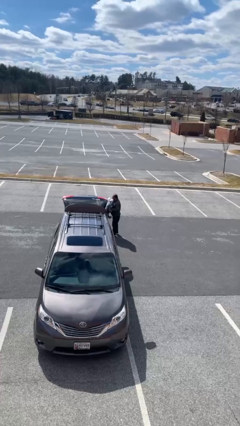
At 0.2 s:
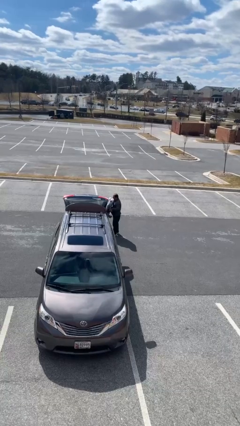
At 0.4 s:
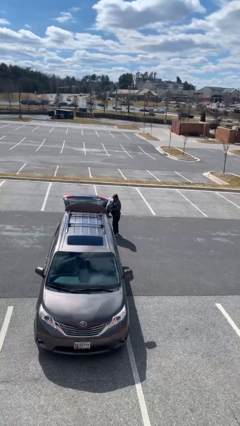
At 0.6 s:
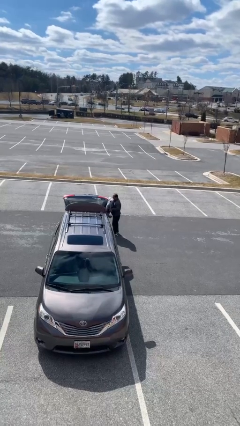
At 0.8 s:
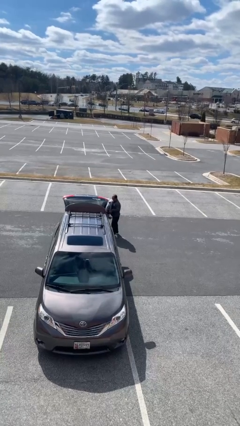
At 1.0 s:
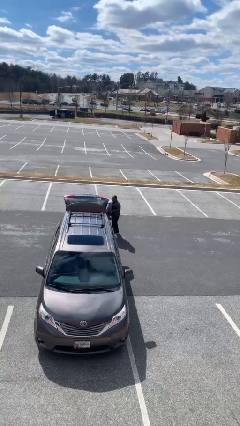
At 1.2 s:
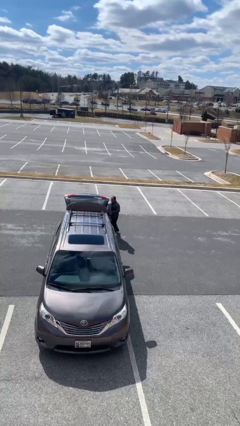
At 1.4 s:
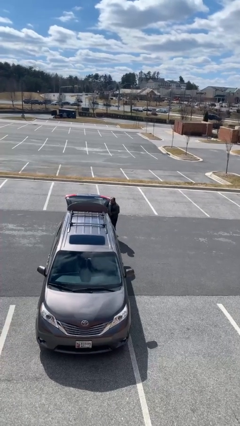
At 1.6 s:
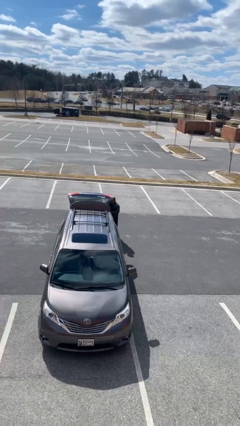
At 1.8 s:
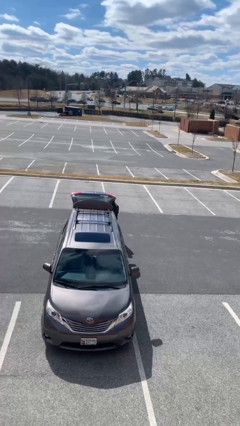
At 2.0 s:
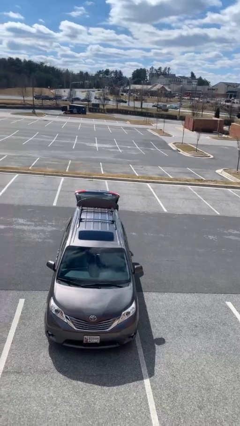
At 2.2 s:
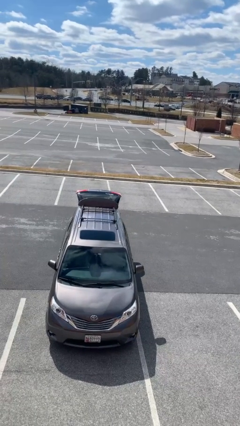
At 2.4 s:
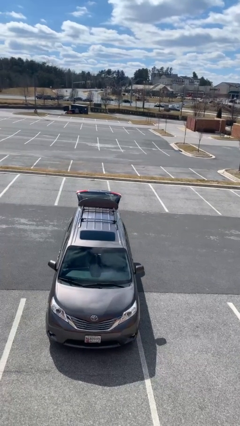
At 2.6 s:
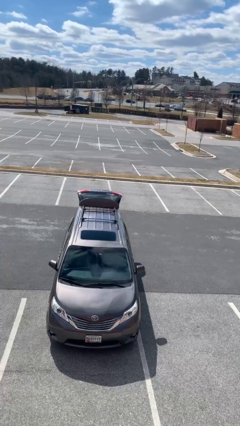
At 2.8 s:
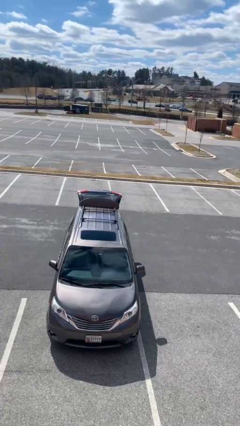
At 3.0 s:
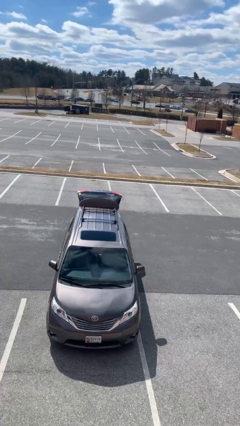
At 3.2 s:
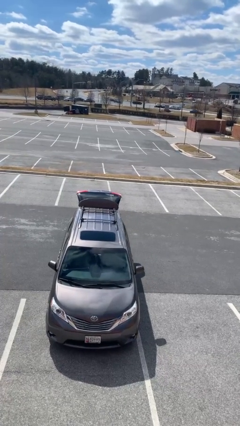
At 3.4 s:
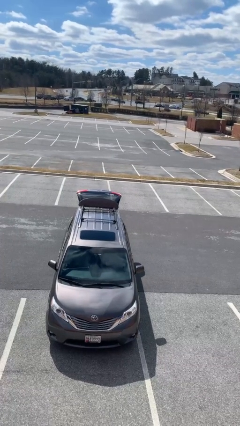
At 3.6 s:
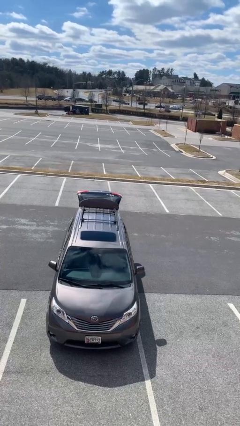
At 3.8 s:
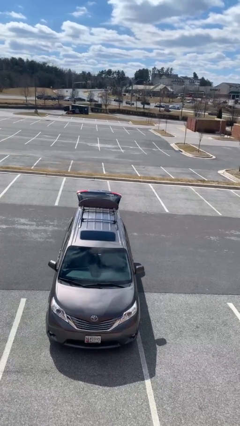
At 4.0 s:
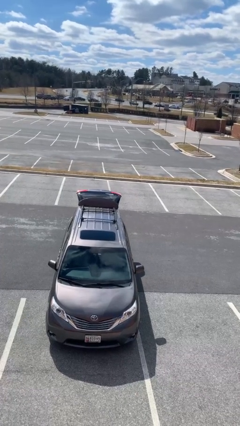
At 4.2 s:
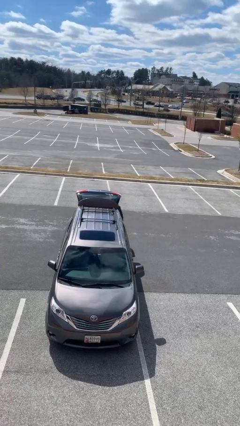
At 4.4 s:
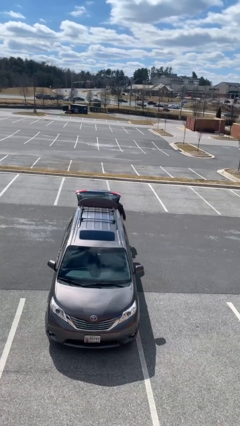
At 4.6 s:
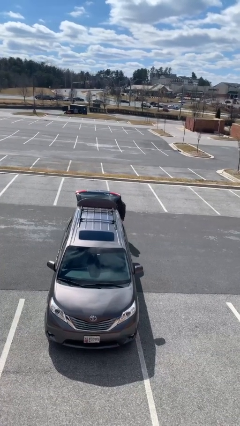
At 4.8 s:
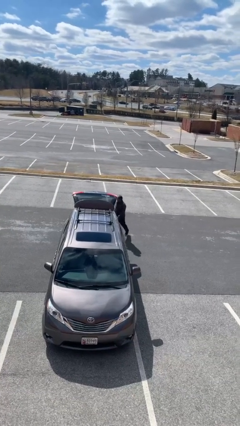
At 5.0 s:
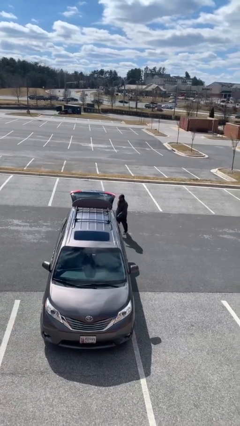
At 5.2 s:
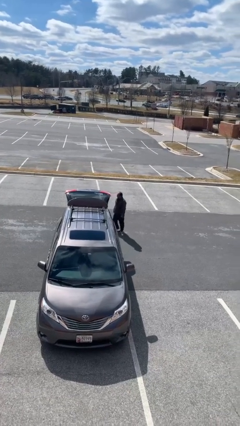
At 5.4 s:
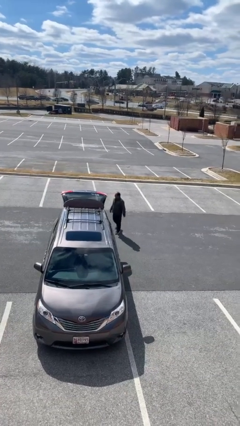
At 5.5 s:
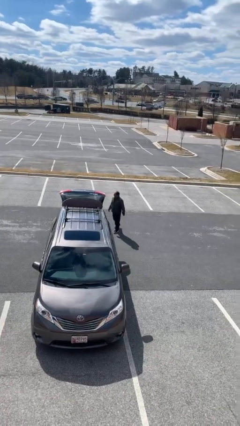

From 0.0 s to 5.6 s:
person loads car

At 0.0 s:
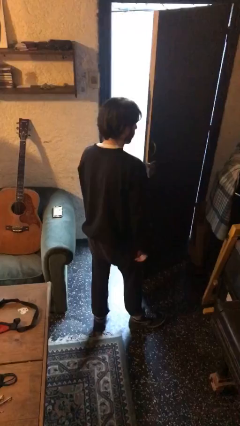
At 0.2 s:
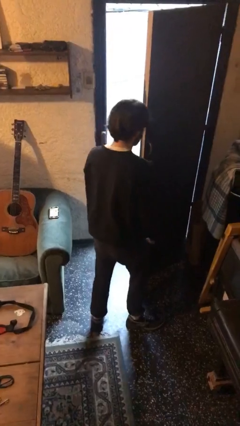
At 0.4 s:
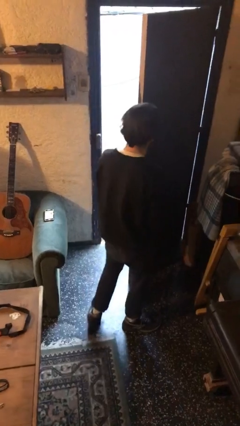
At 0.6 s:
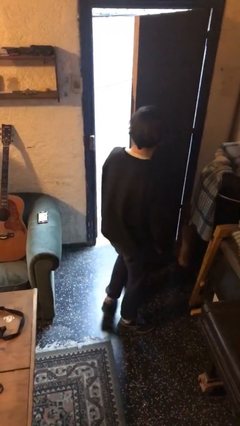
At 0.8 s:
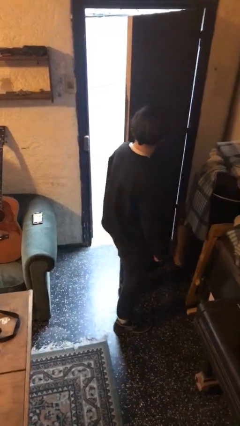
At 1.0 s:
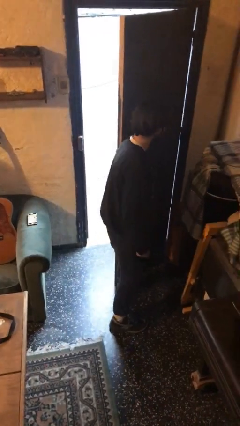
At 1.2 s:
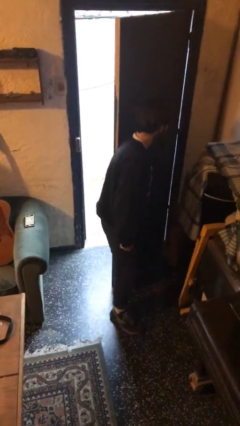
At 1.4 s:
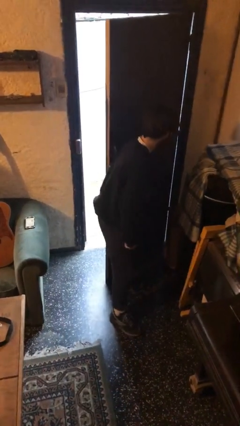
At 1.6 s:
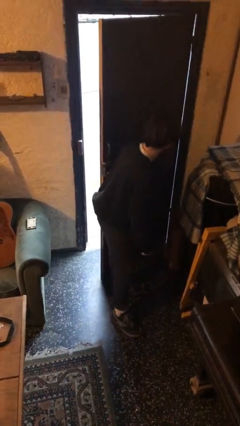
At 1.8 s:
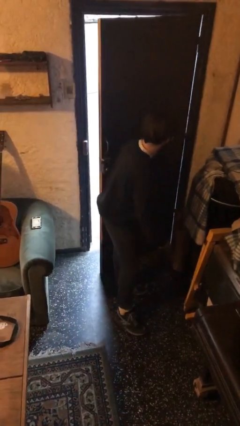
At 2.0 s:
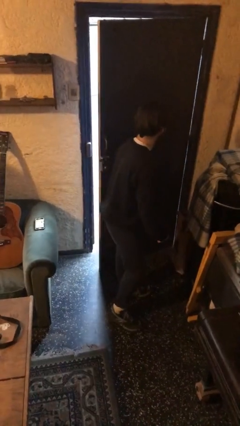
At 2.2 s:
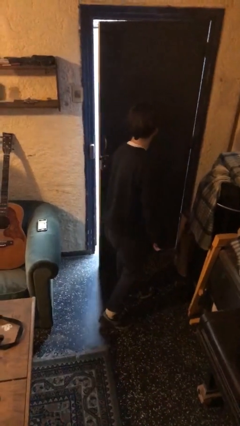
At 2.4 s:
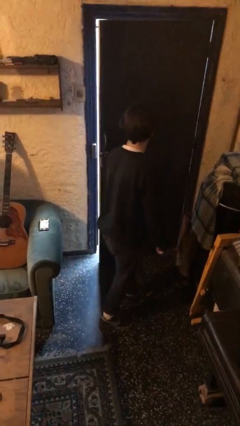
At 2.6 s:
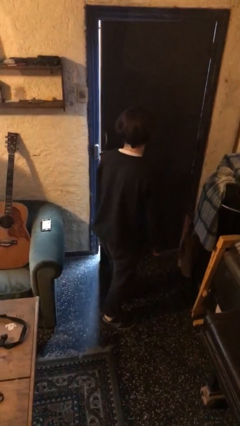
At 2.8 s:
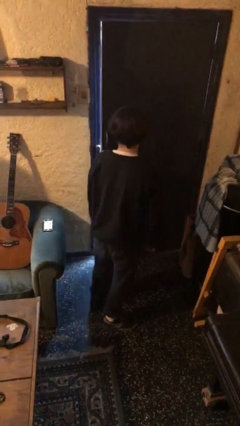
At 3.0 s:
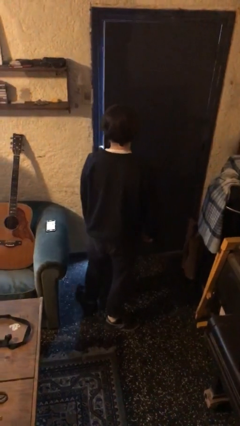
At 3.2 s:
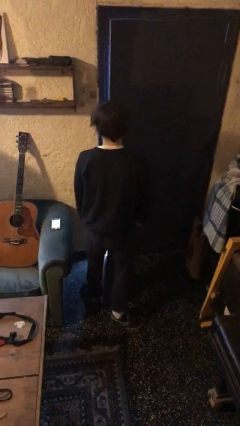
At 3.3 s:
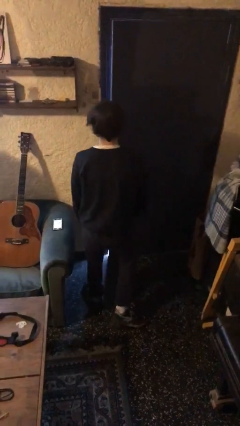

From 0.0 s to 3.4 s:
person closes door with hip

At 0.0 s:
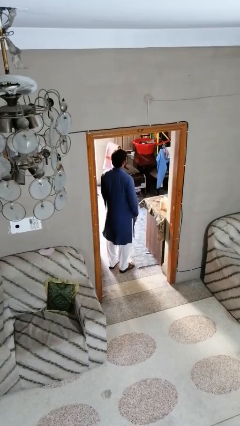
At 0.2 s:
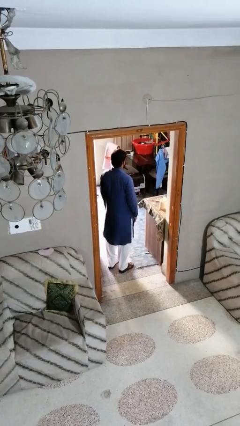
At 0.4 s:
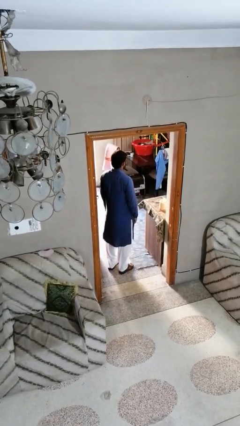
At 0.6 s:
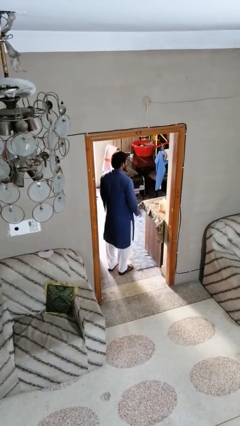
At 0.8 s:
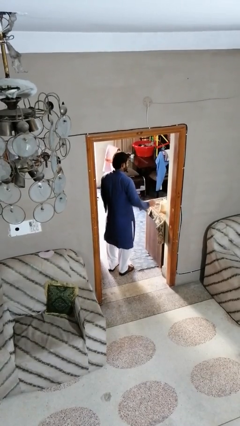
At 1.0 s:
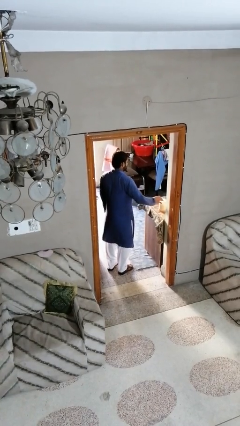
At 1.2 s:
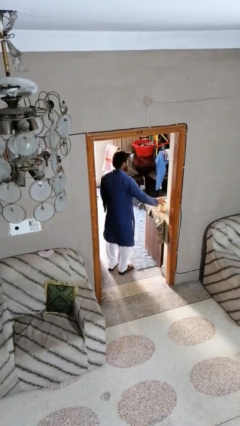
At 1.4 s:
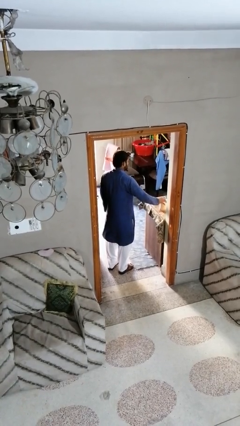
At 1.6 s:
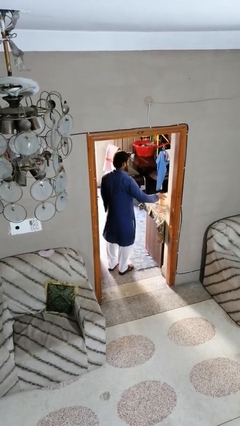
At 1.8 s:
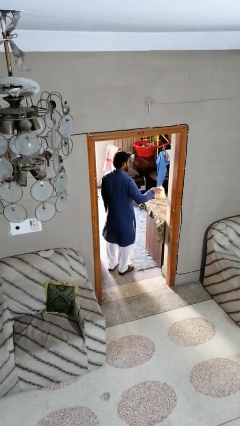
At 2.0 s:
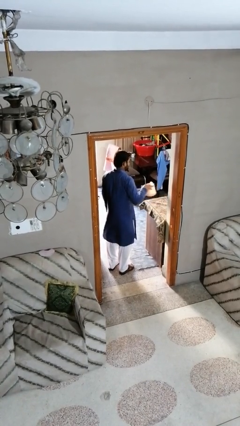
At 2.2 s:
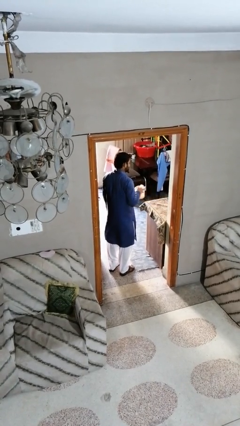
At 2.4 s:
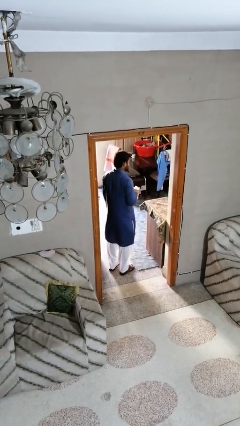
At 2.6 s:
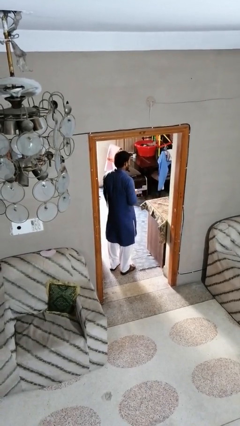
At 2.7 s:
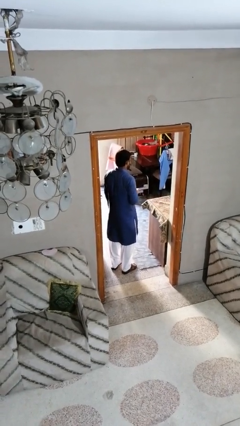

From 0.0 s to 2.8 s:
person picks up object from countertop

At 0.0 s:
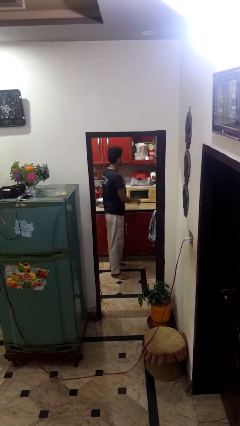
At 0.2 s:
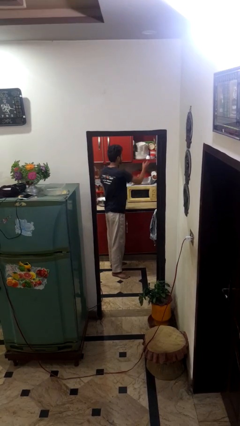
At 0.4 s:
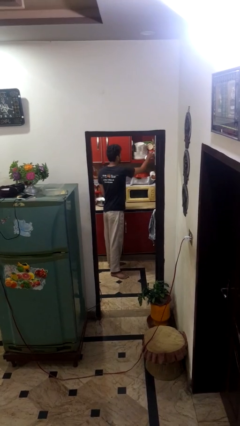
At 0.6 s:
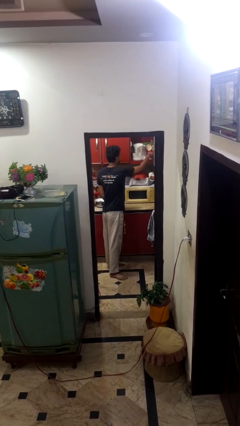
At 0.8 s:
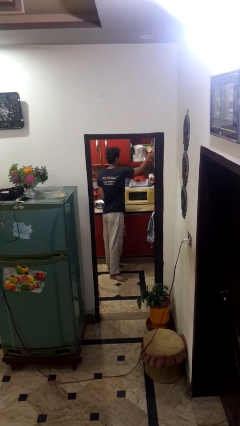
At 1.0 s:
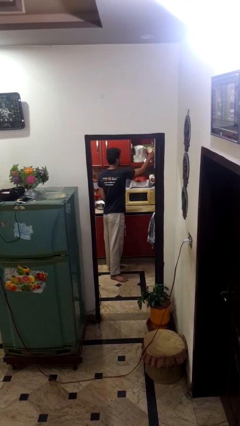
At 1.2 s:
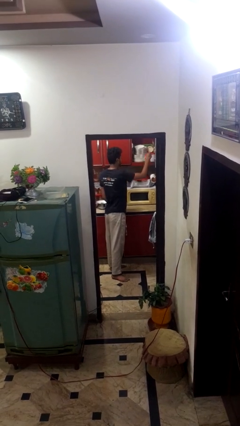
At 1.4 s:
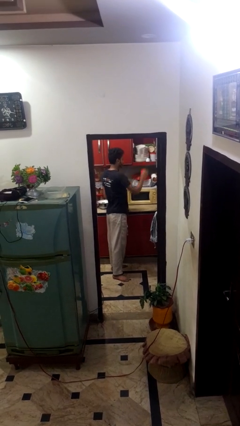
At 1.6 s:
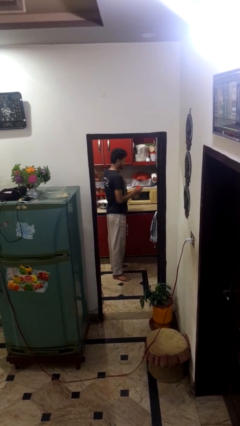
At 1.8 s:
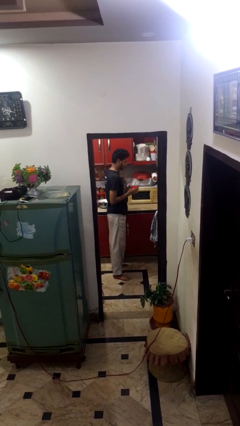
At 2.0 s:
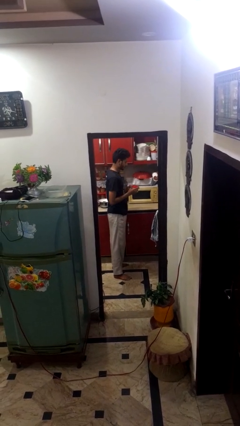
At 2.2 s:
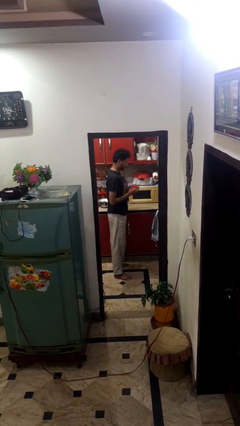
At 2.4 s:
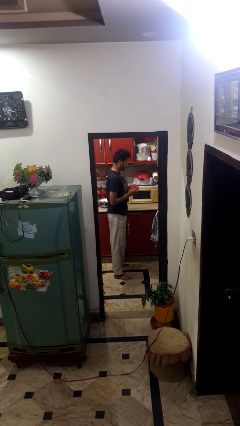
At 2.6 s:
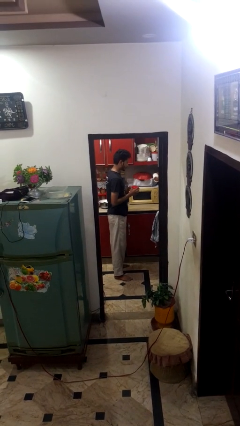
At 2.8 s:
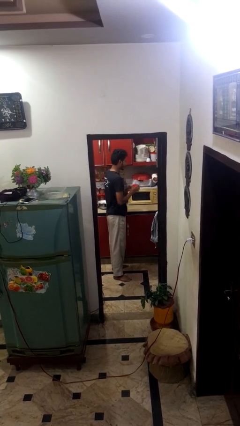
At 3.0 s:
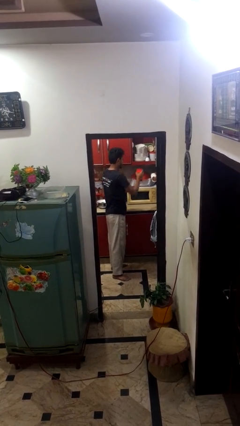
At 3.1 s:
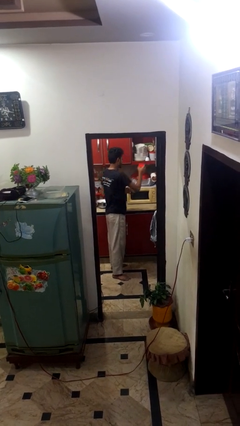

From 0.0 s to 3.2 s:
person picks up object from cabinet

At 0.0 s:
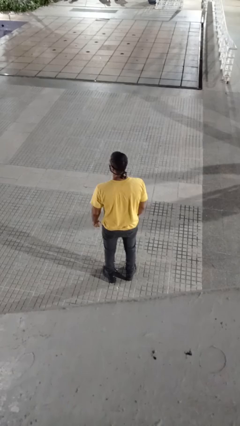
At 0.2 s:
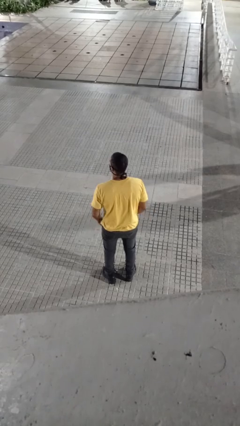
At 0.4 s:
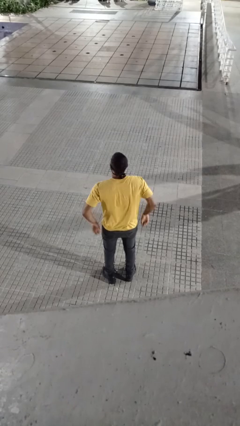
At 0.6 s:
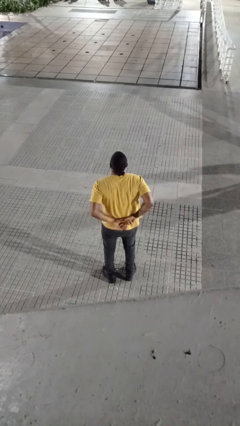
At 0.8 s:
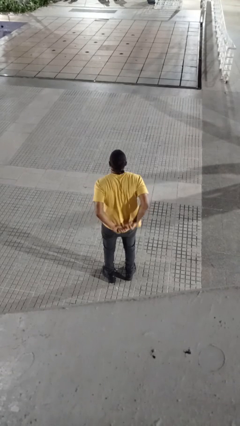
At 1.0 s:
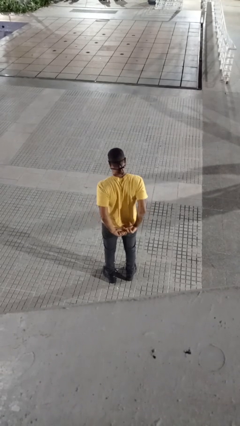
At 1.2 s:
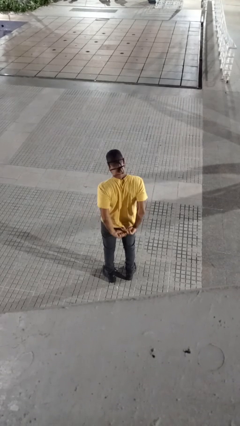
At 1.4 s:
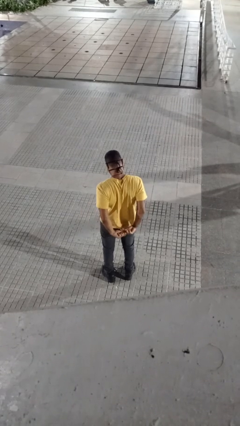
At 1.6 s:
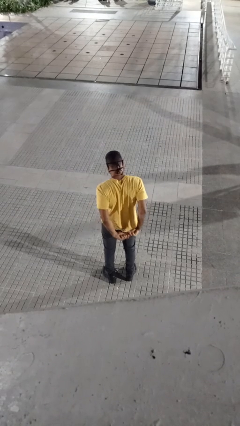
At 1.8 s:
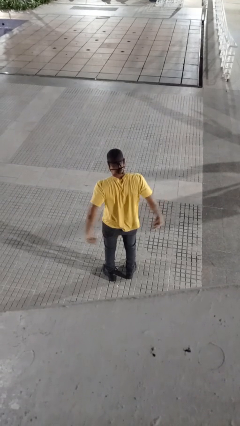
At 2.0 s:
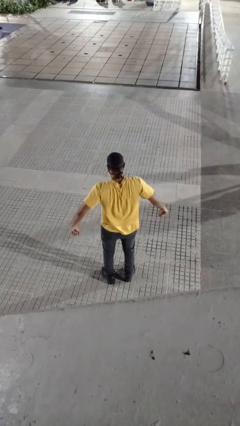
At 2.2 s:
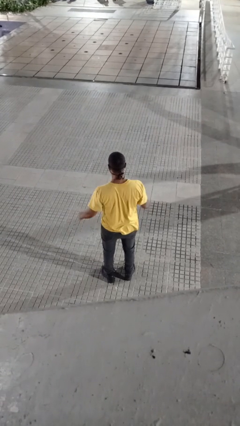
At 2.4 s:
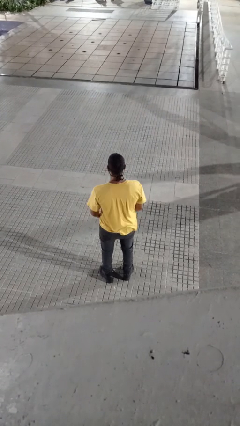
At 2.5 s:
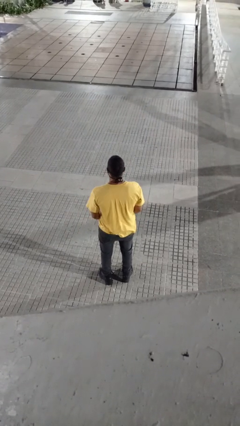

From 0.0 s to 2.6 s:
person stretches back
